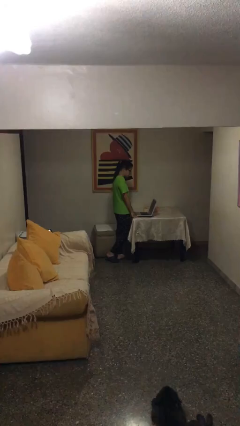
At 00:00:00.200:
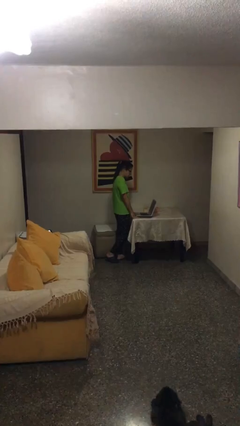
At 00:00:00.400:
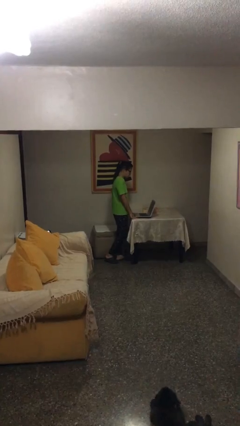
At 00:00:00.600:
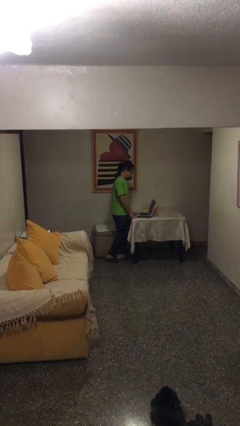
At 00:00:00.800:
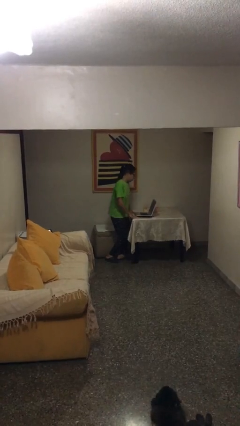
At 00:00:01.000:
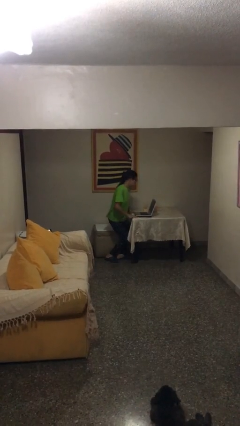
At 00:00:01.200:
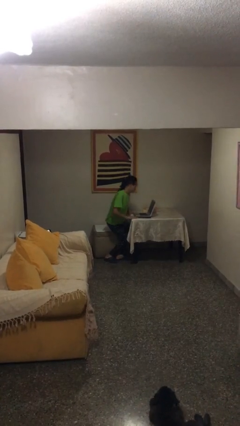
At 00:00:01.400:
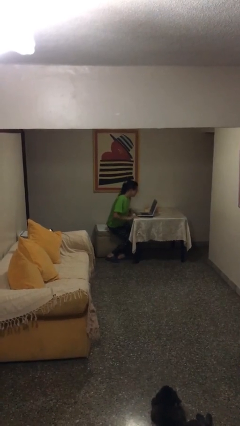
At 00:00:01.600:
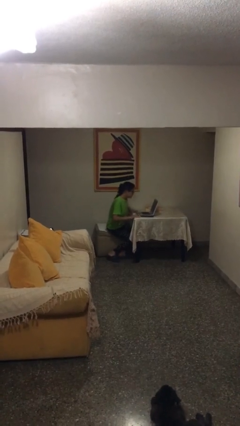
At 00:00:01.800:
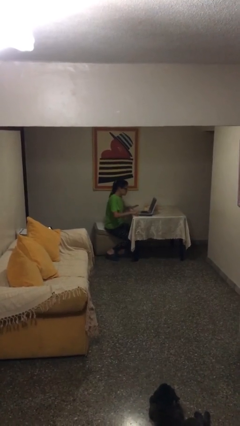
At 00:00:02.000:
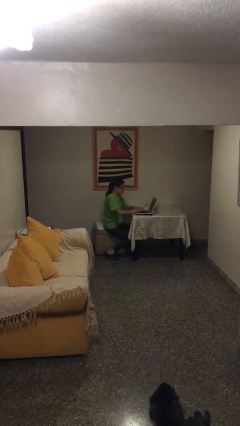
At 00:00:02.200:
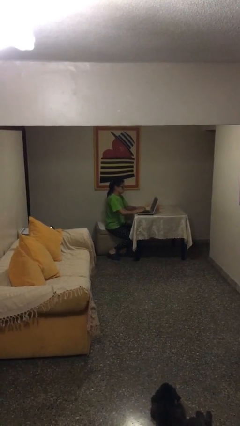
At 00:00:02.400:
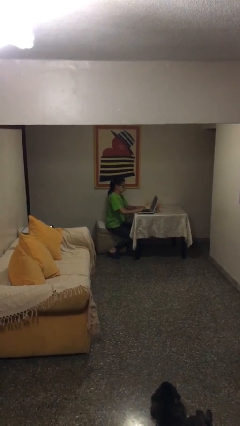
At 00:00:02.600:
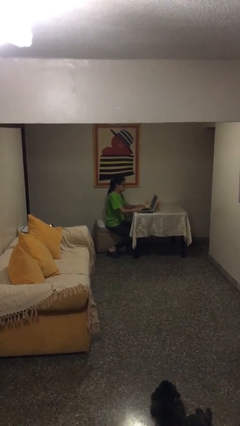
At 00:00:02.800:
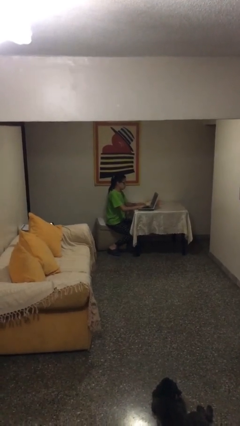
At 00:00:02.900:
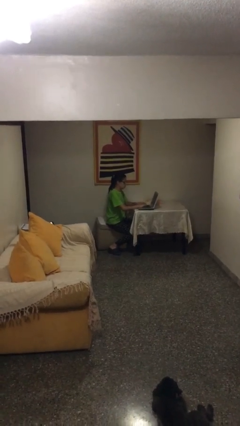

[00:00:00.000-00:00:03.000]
person sits down

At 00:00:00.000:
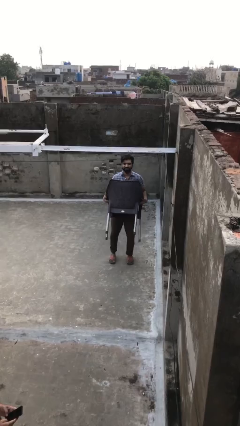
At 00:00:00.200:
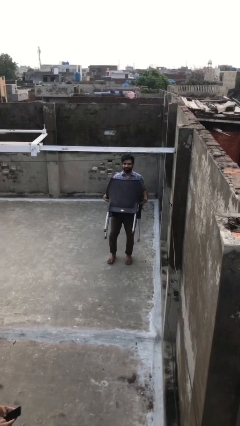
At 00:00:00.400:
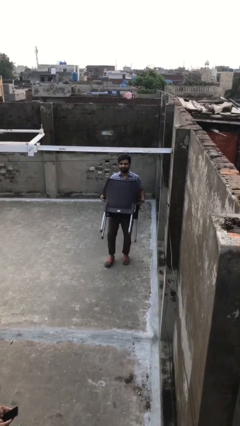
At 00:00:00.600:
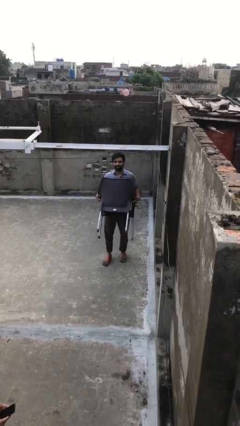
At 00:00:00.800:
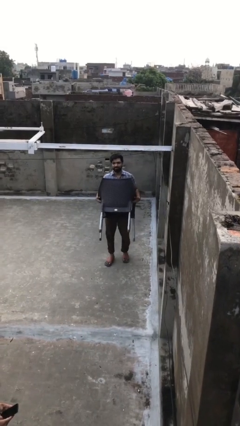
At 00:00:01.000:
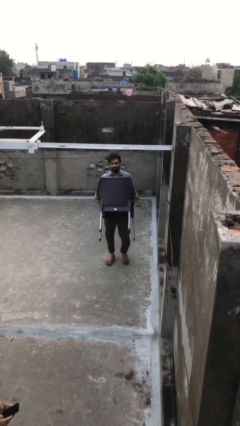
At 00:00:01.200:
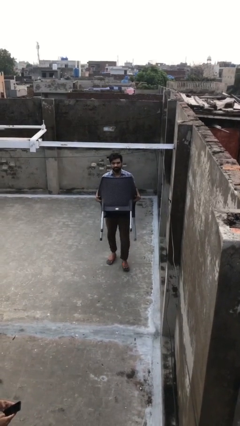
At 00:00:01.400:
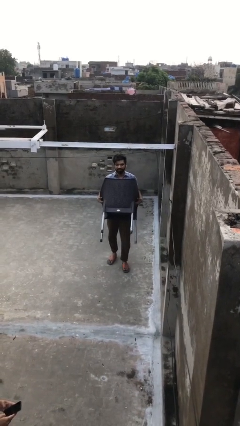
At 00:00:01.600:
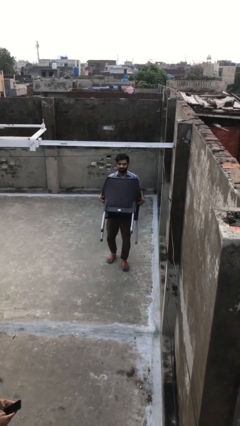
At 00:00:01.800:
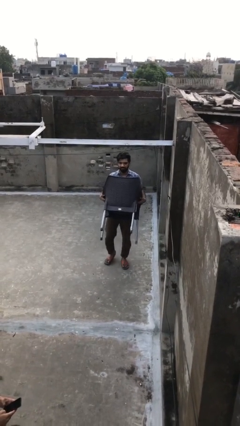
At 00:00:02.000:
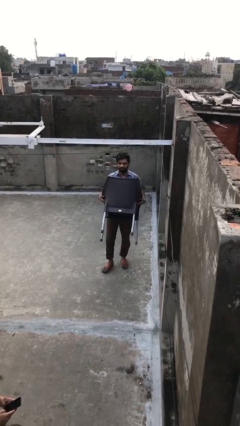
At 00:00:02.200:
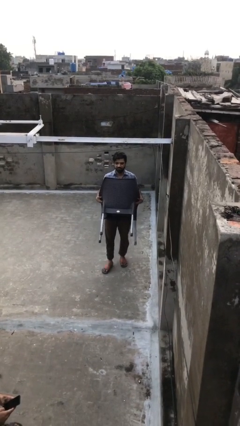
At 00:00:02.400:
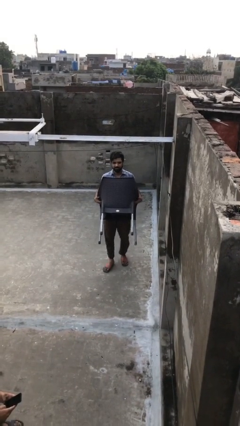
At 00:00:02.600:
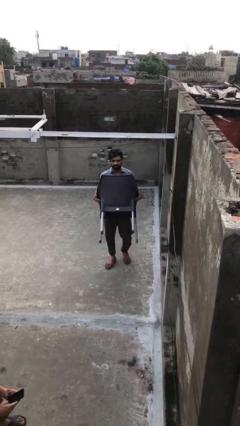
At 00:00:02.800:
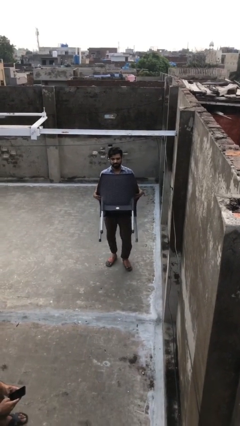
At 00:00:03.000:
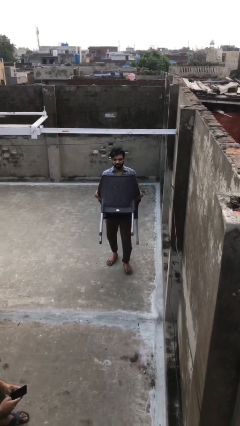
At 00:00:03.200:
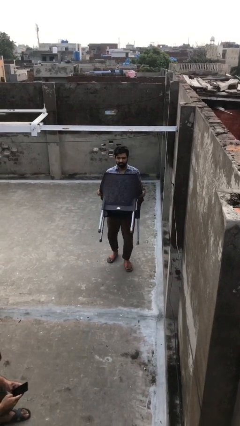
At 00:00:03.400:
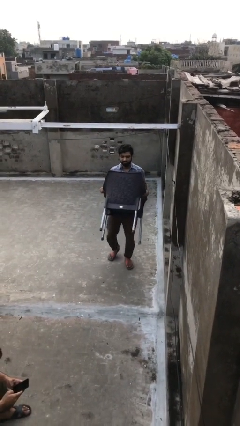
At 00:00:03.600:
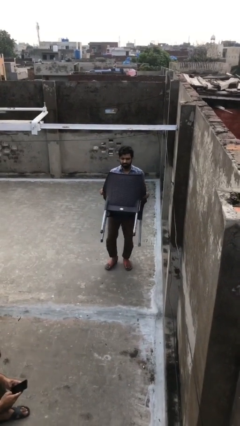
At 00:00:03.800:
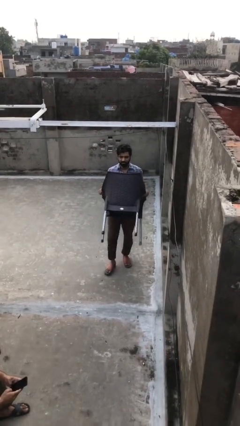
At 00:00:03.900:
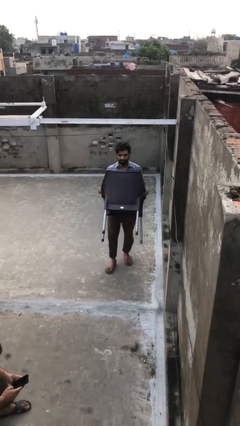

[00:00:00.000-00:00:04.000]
person carries heavy object

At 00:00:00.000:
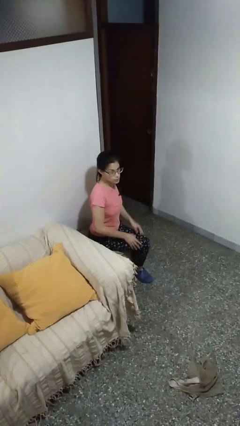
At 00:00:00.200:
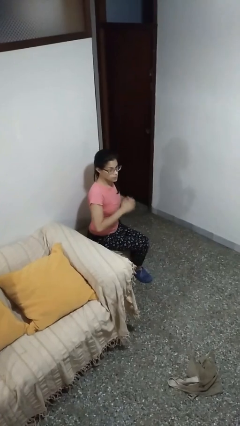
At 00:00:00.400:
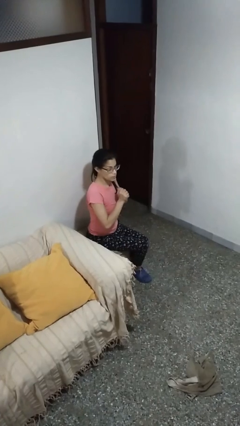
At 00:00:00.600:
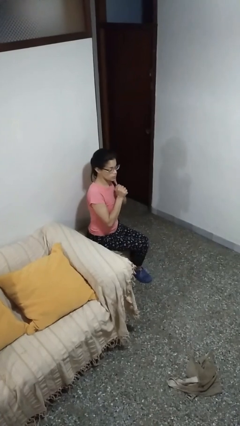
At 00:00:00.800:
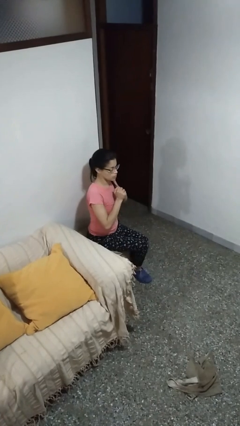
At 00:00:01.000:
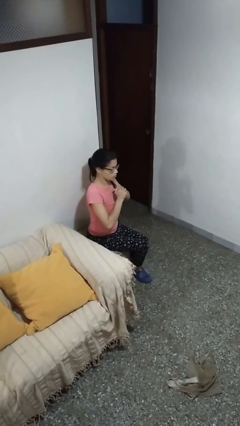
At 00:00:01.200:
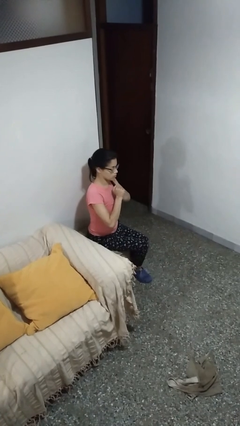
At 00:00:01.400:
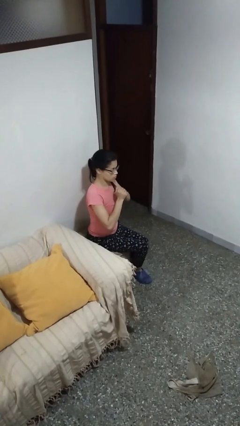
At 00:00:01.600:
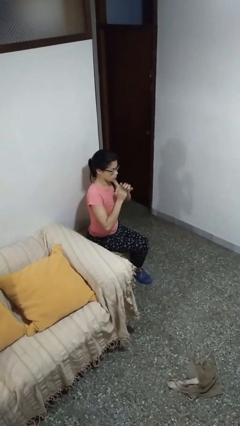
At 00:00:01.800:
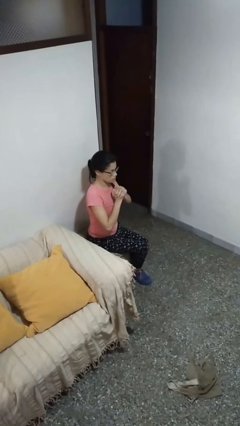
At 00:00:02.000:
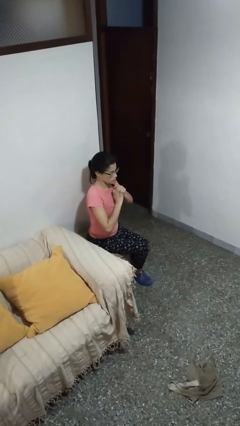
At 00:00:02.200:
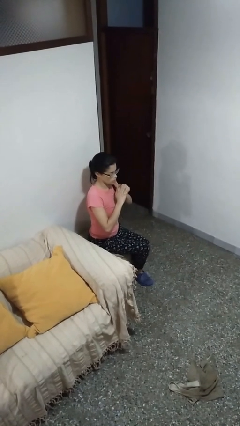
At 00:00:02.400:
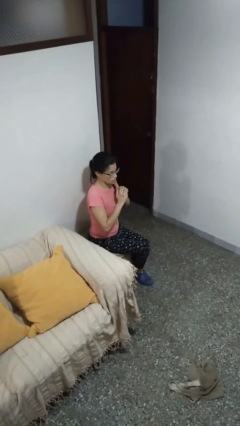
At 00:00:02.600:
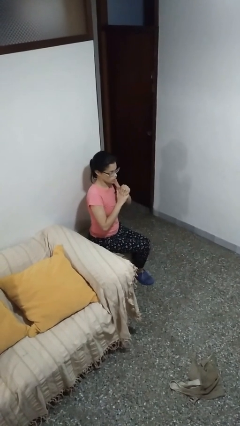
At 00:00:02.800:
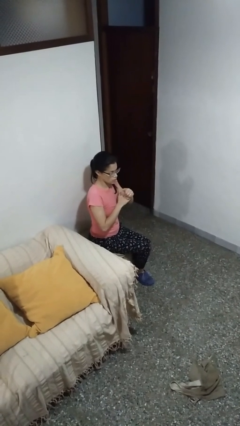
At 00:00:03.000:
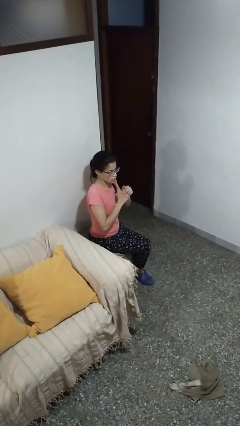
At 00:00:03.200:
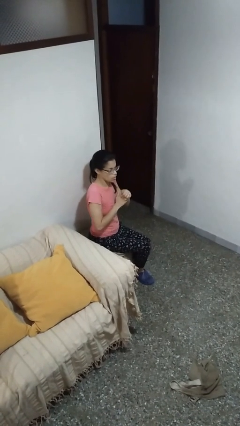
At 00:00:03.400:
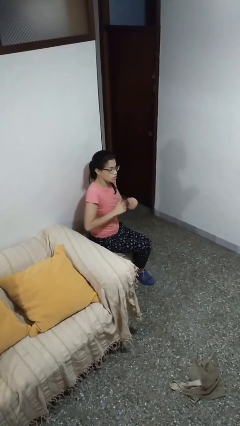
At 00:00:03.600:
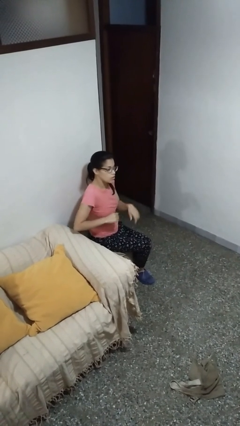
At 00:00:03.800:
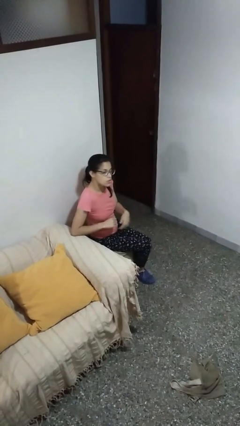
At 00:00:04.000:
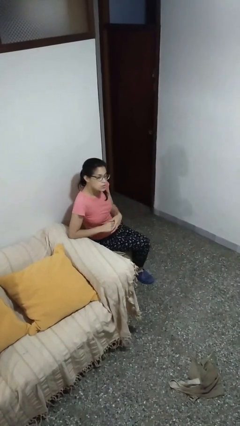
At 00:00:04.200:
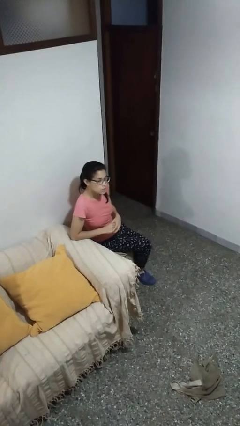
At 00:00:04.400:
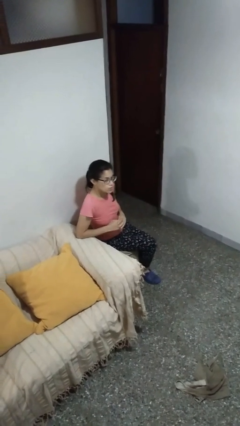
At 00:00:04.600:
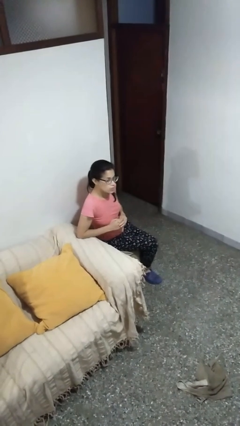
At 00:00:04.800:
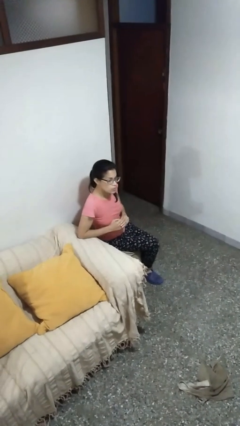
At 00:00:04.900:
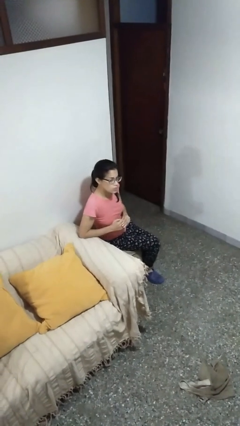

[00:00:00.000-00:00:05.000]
person cracks knuckles

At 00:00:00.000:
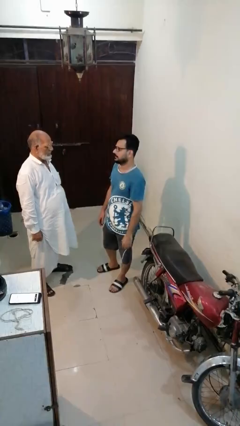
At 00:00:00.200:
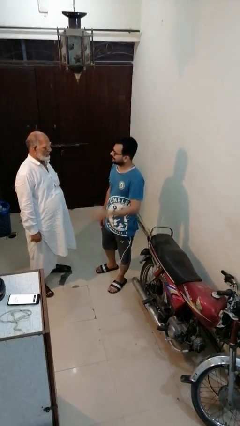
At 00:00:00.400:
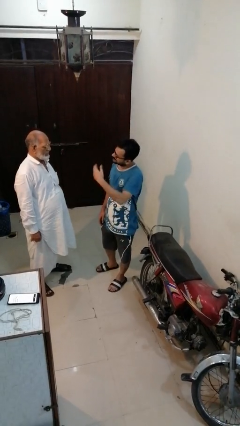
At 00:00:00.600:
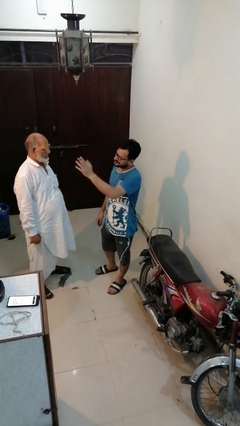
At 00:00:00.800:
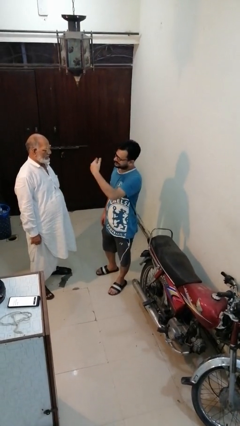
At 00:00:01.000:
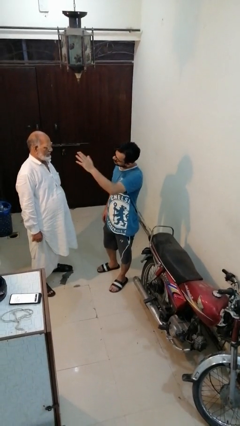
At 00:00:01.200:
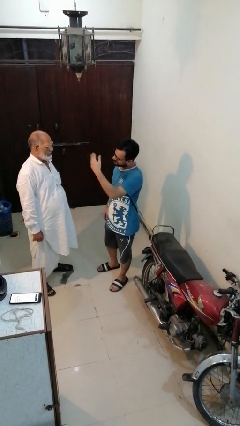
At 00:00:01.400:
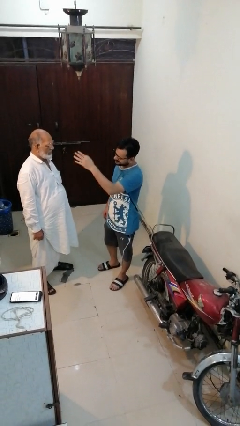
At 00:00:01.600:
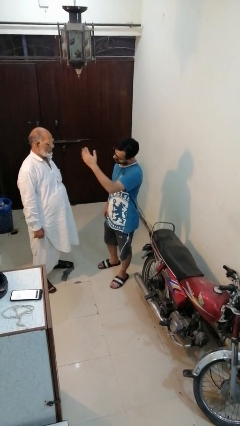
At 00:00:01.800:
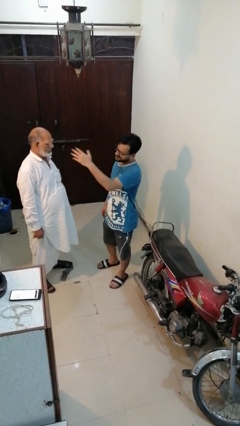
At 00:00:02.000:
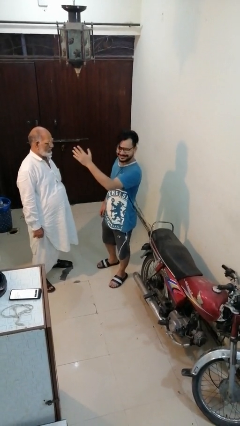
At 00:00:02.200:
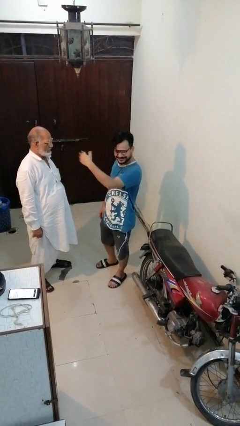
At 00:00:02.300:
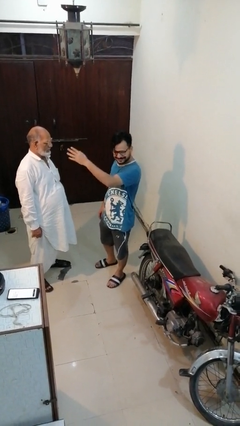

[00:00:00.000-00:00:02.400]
person shoves person

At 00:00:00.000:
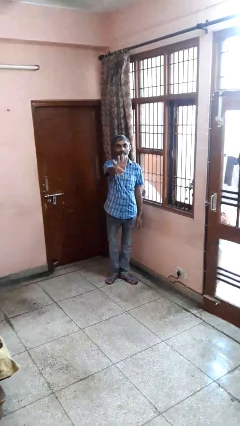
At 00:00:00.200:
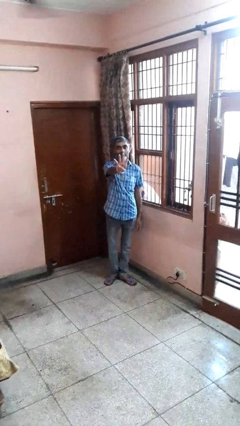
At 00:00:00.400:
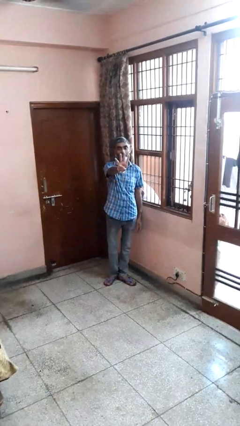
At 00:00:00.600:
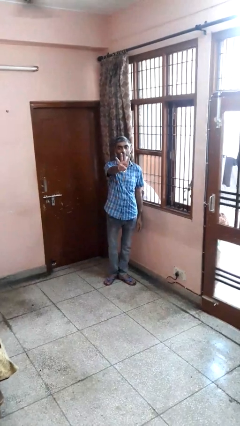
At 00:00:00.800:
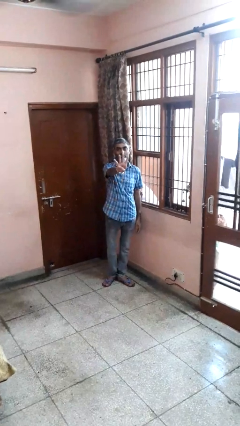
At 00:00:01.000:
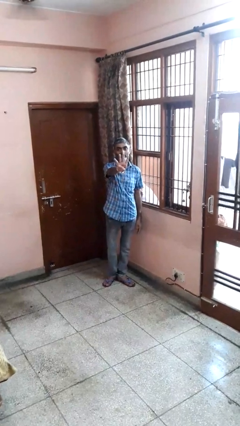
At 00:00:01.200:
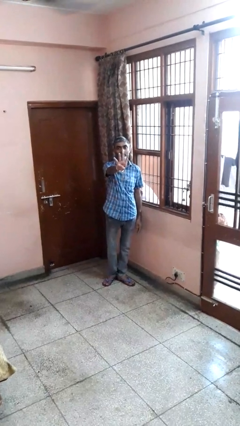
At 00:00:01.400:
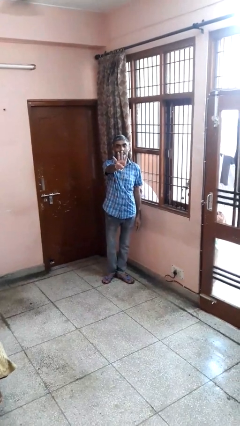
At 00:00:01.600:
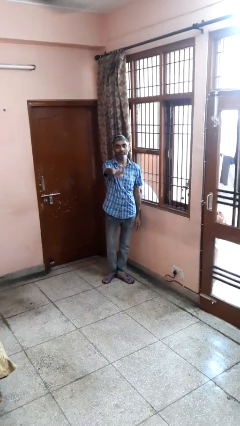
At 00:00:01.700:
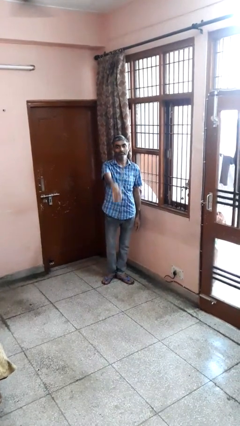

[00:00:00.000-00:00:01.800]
person gestures number four

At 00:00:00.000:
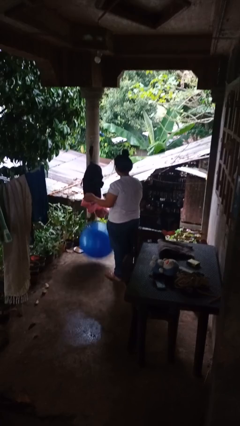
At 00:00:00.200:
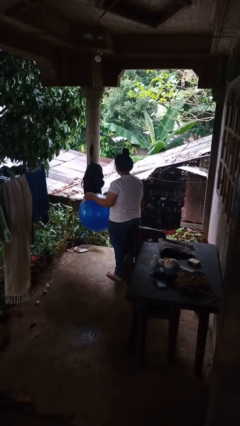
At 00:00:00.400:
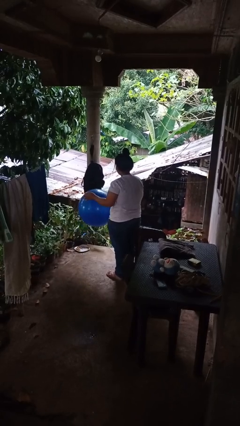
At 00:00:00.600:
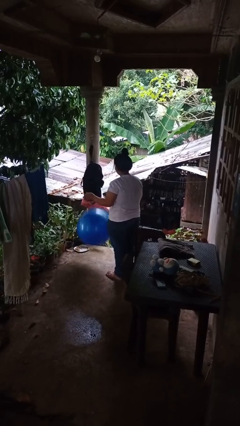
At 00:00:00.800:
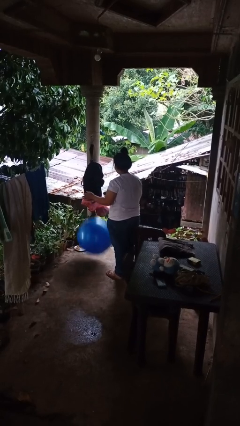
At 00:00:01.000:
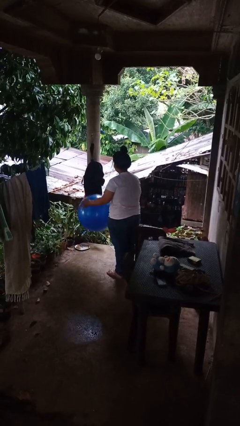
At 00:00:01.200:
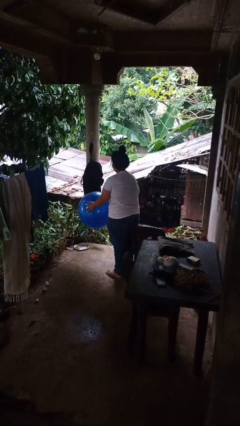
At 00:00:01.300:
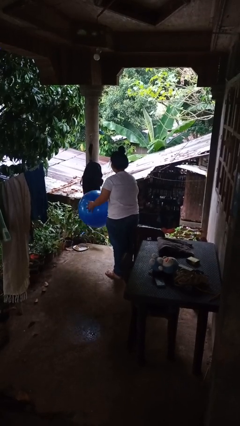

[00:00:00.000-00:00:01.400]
person bounces ball on floor
